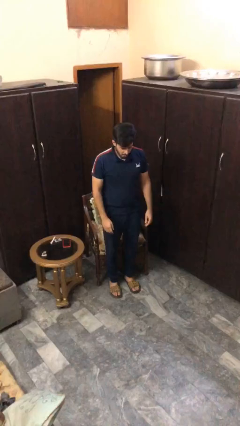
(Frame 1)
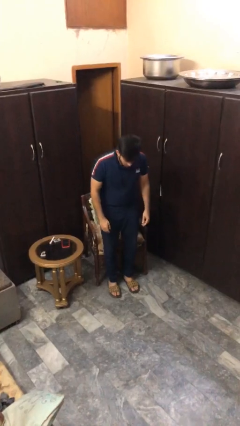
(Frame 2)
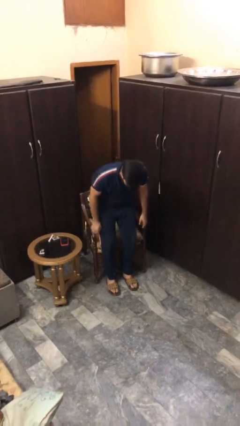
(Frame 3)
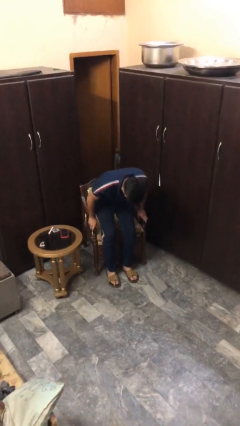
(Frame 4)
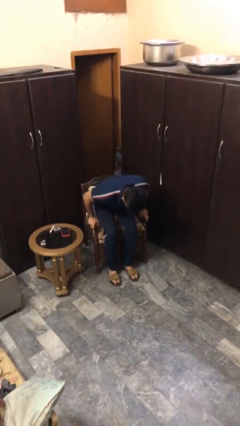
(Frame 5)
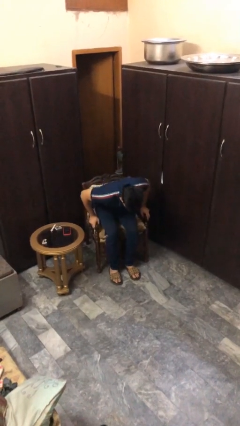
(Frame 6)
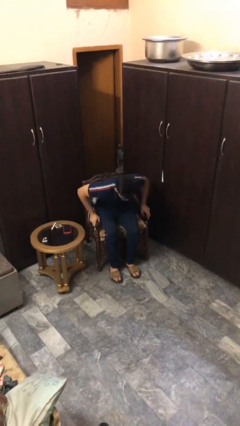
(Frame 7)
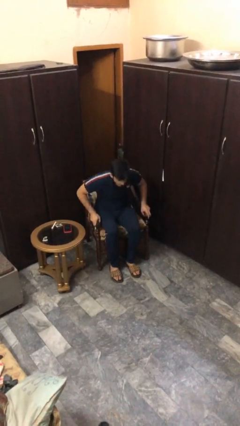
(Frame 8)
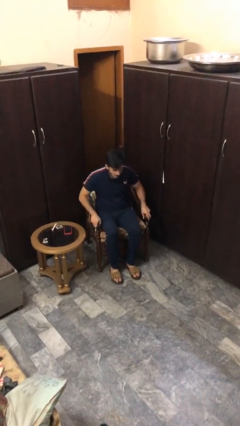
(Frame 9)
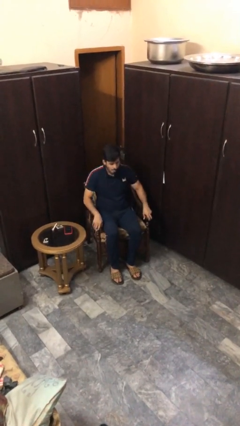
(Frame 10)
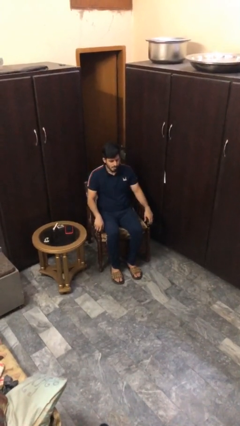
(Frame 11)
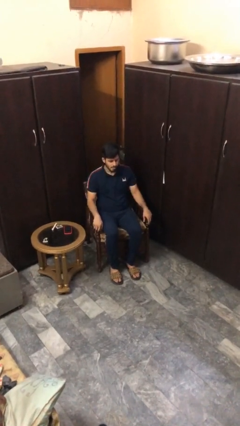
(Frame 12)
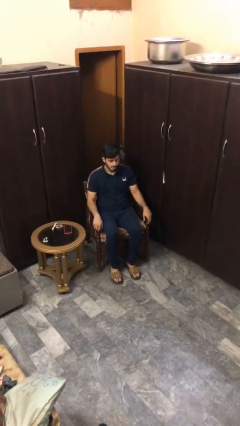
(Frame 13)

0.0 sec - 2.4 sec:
person sits down

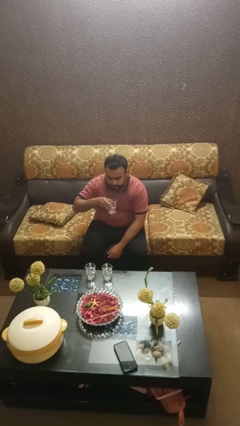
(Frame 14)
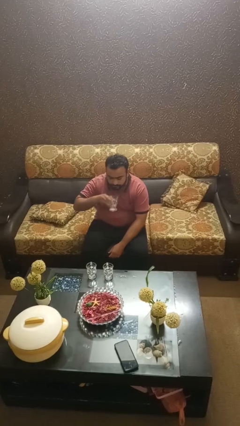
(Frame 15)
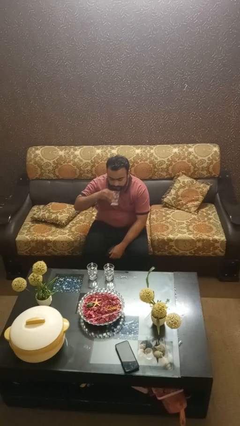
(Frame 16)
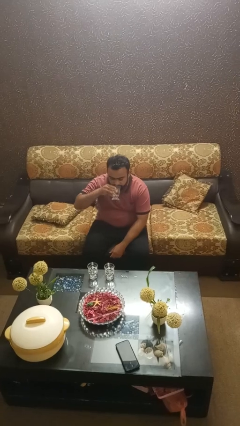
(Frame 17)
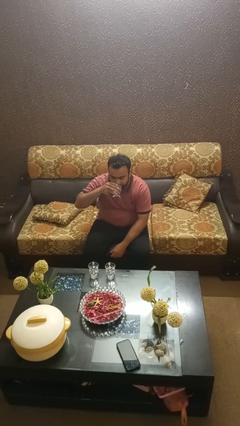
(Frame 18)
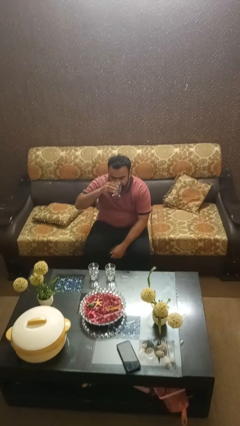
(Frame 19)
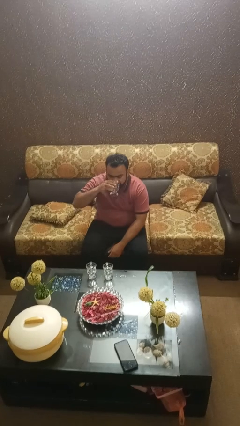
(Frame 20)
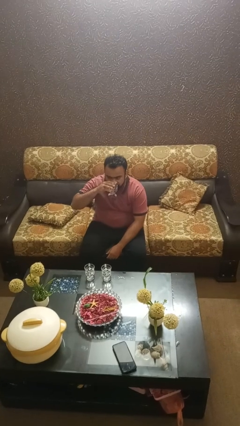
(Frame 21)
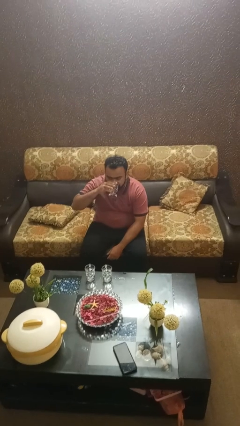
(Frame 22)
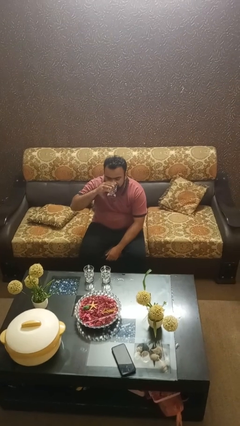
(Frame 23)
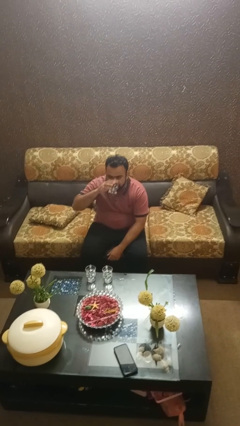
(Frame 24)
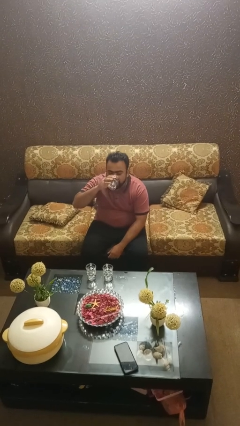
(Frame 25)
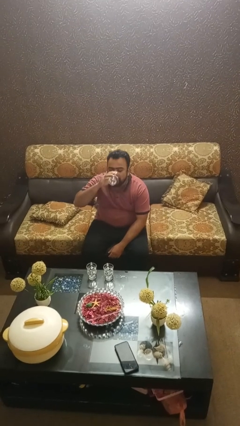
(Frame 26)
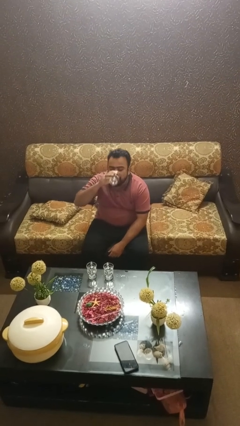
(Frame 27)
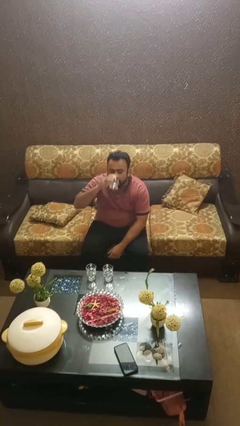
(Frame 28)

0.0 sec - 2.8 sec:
person drinks from shotglass

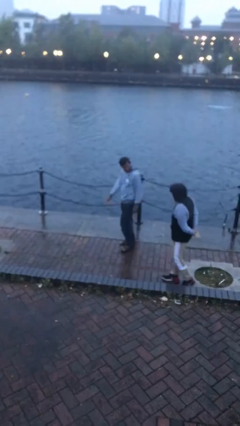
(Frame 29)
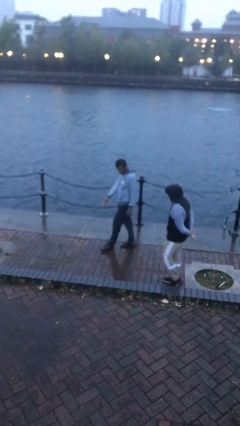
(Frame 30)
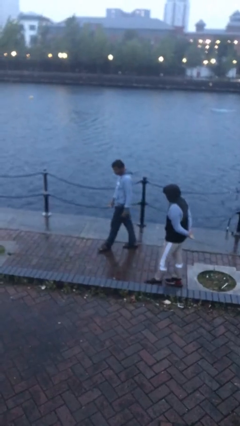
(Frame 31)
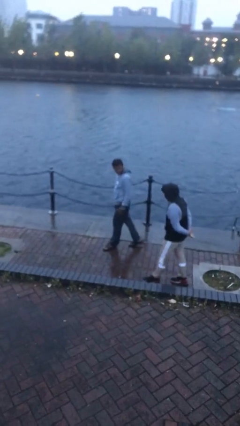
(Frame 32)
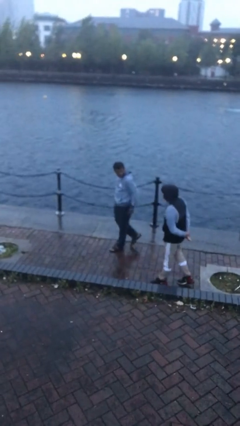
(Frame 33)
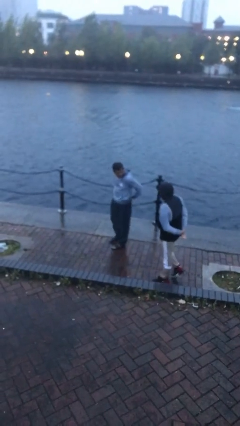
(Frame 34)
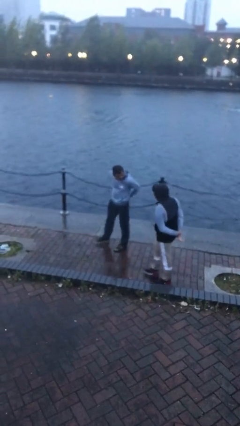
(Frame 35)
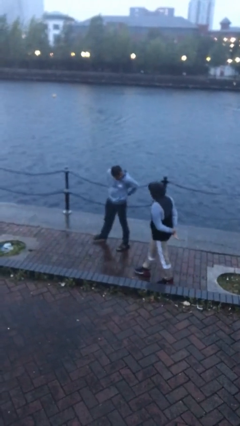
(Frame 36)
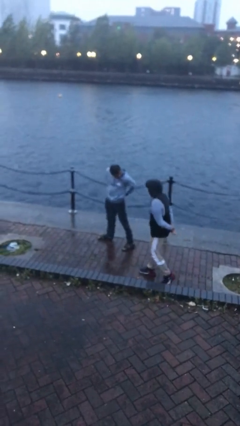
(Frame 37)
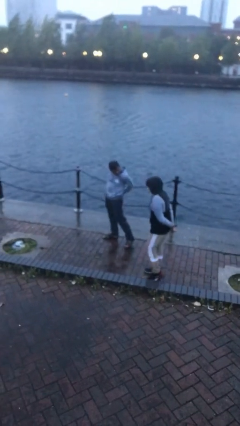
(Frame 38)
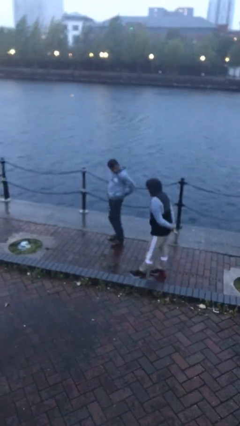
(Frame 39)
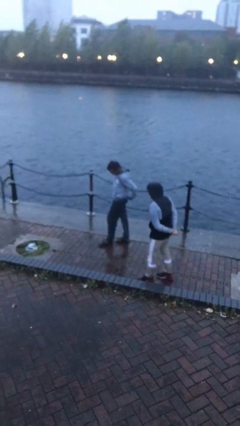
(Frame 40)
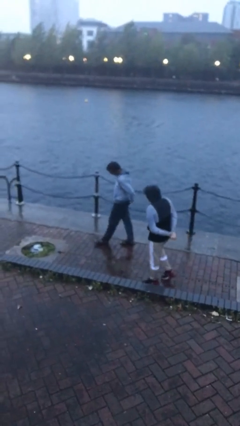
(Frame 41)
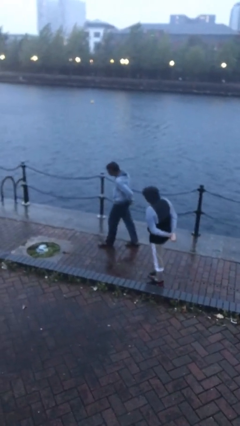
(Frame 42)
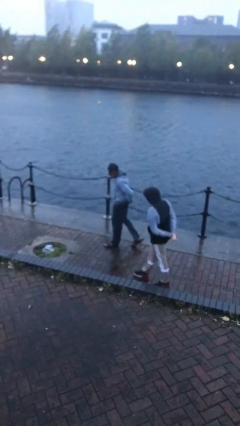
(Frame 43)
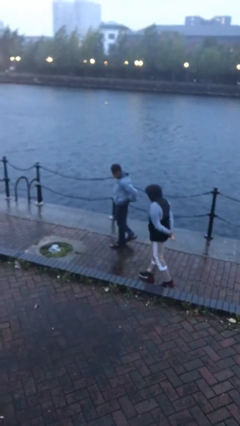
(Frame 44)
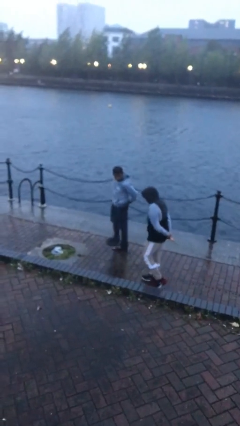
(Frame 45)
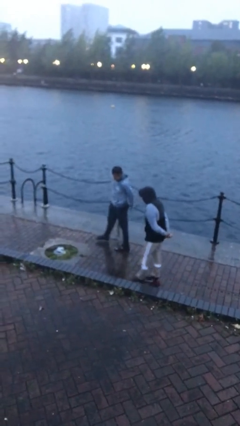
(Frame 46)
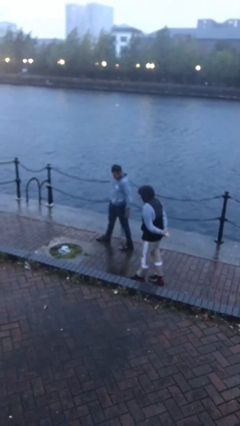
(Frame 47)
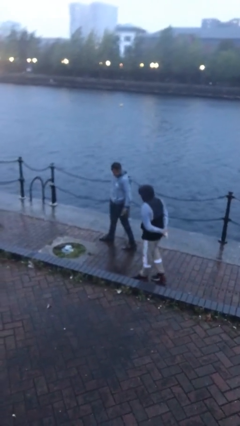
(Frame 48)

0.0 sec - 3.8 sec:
person talks to person

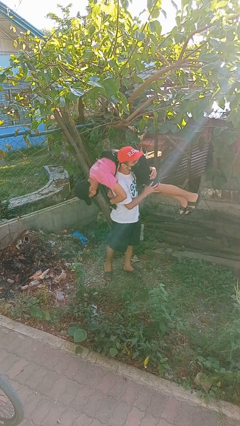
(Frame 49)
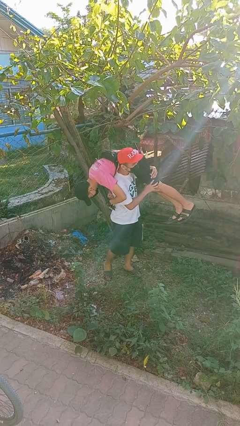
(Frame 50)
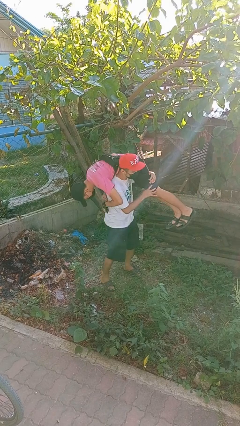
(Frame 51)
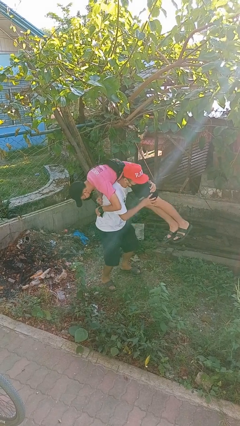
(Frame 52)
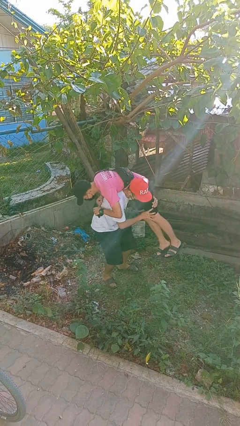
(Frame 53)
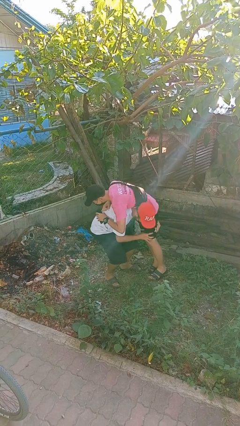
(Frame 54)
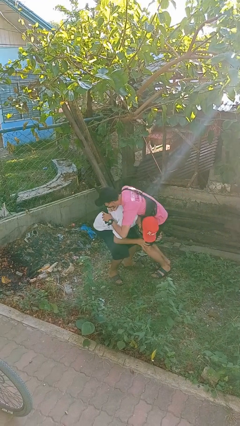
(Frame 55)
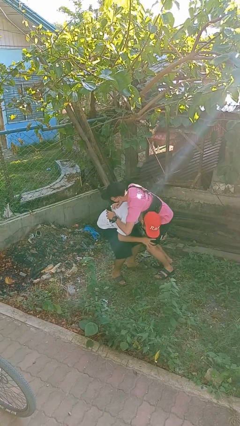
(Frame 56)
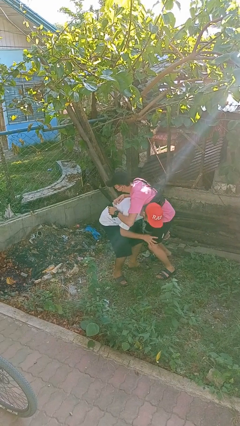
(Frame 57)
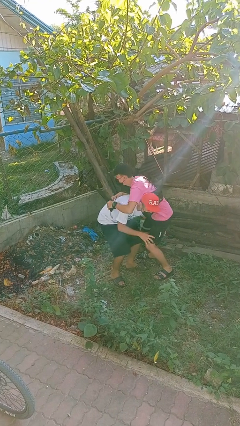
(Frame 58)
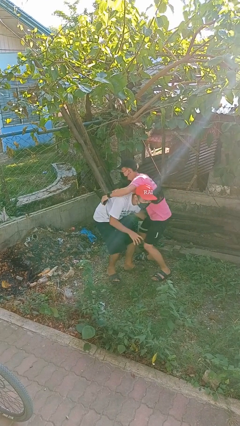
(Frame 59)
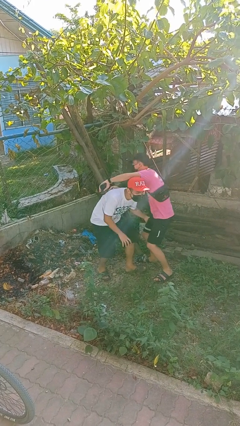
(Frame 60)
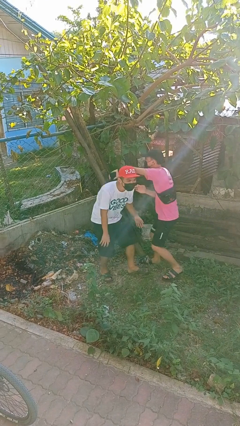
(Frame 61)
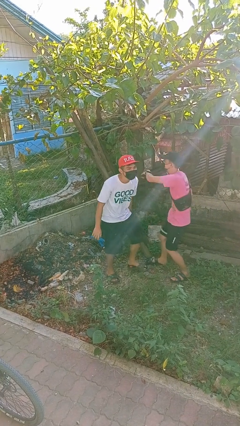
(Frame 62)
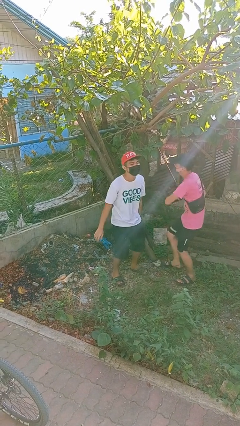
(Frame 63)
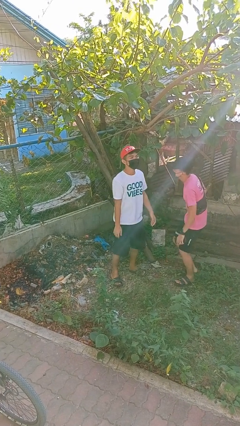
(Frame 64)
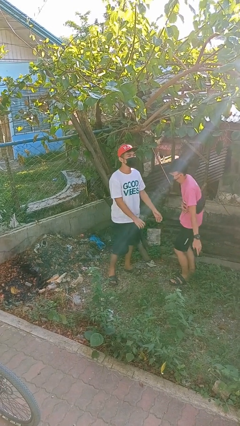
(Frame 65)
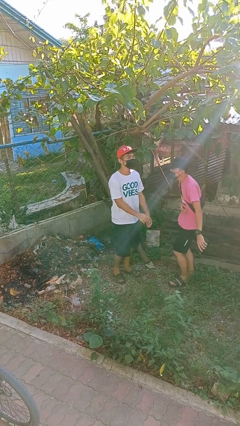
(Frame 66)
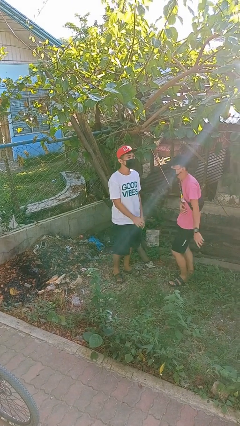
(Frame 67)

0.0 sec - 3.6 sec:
person puts down person

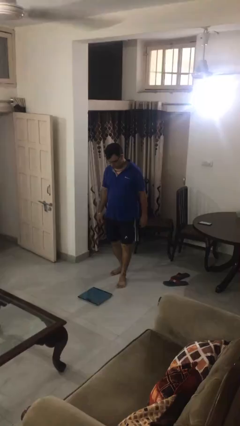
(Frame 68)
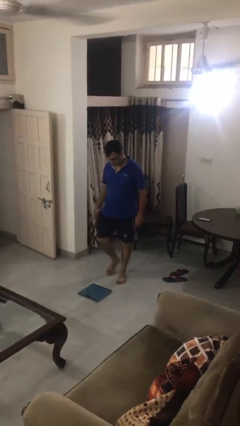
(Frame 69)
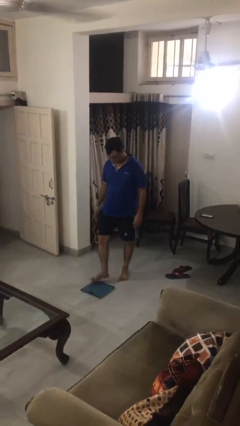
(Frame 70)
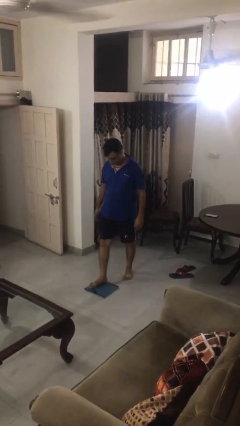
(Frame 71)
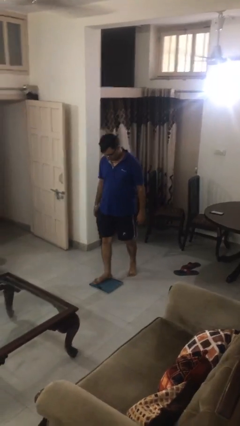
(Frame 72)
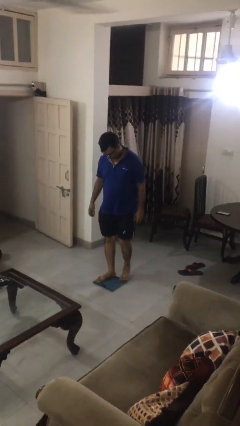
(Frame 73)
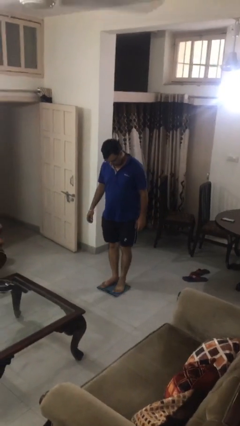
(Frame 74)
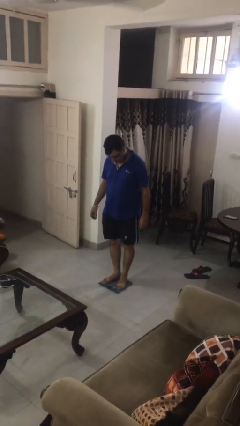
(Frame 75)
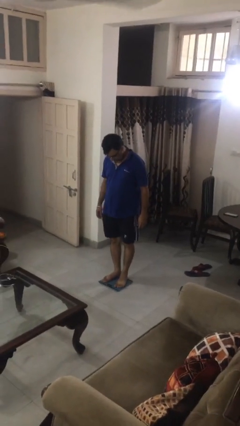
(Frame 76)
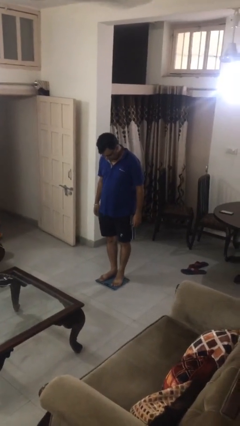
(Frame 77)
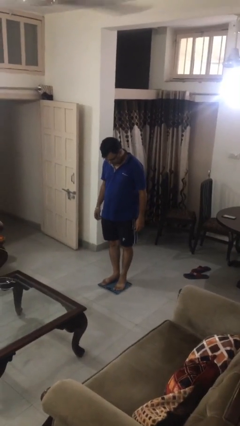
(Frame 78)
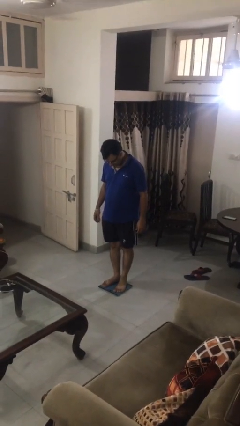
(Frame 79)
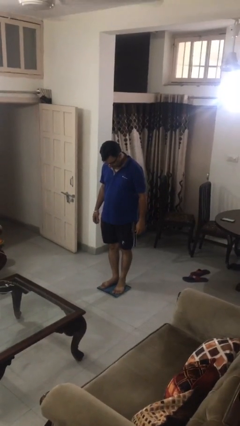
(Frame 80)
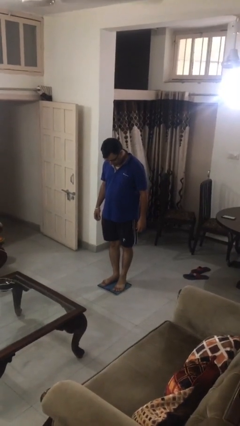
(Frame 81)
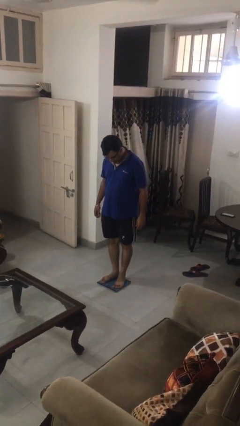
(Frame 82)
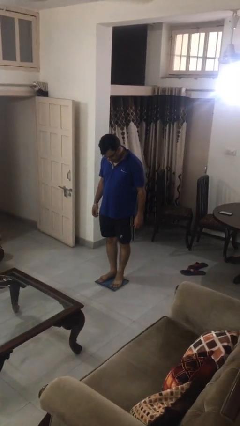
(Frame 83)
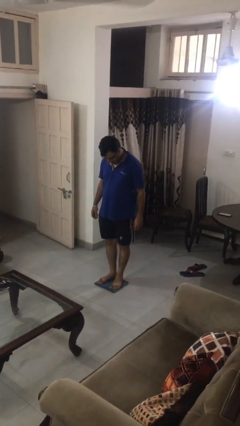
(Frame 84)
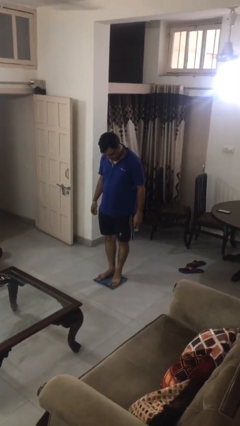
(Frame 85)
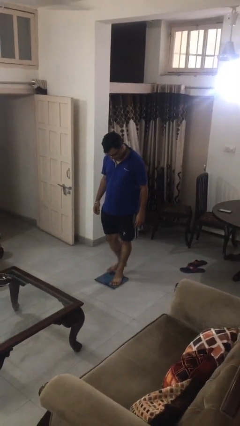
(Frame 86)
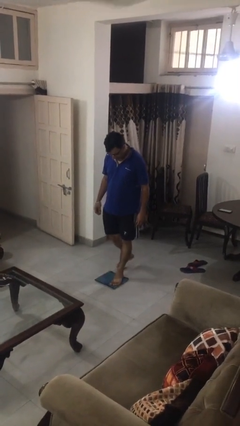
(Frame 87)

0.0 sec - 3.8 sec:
person uses bodyweight scale

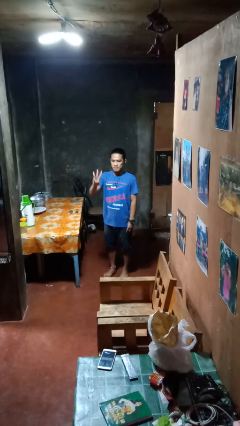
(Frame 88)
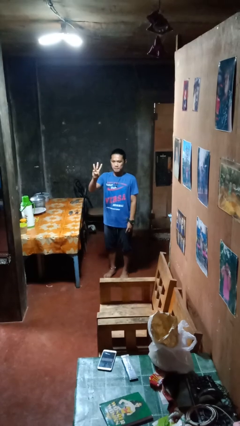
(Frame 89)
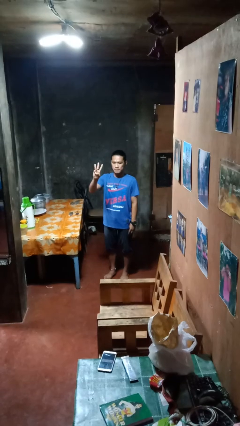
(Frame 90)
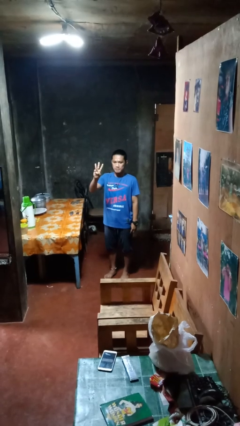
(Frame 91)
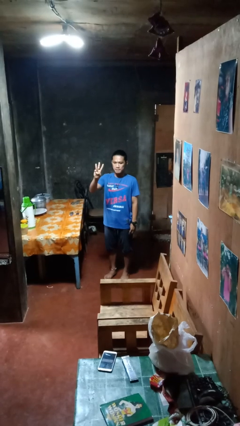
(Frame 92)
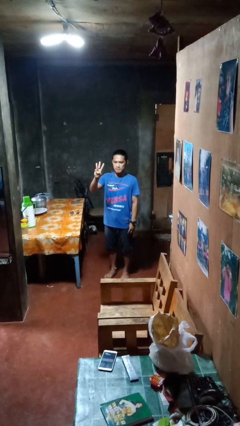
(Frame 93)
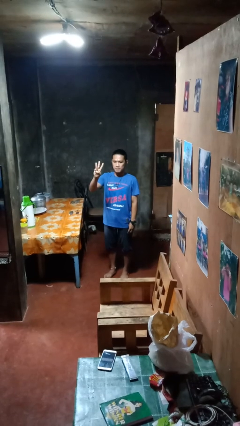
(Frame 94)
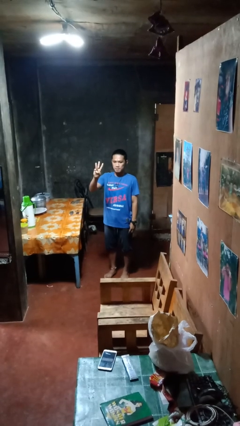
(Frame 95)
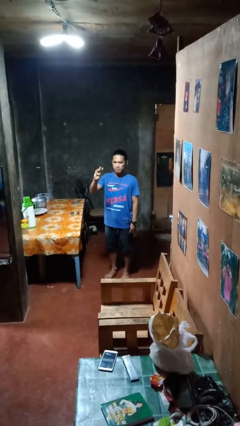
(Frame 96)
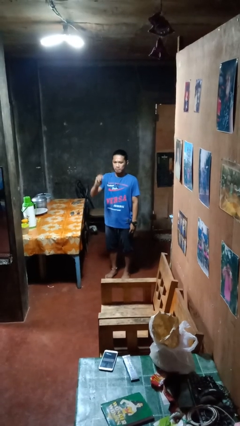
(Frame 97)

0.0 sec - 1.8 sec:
person gestures number three
